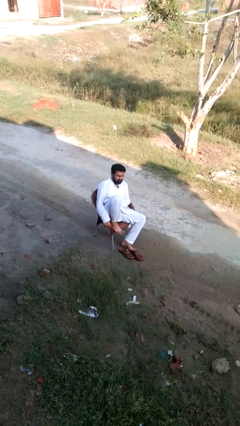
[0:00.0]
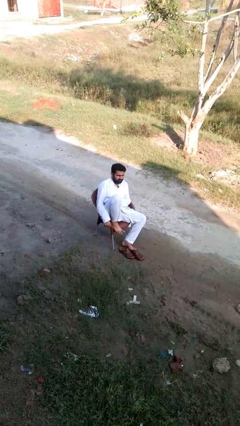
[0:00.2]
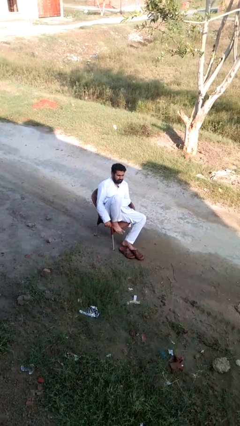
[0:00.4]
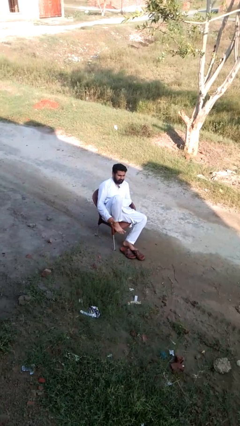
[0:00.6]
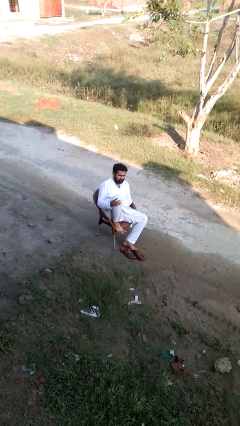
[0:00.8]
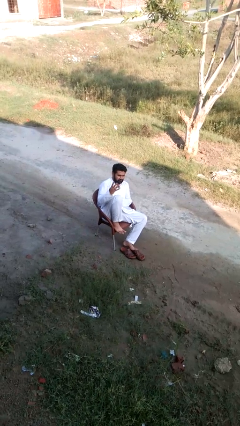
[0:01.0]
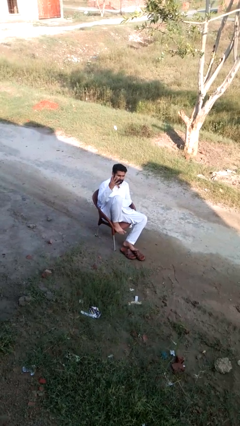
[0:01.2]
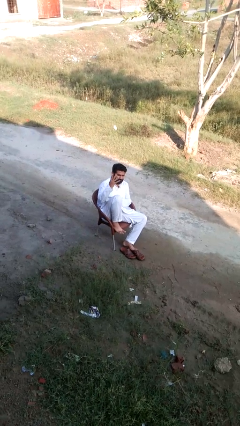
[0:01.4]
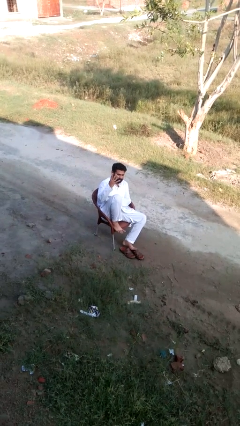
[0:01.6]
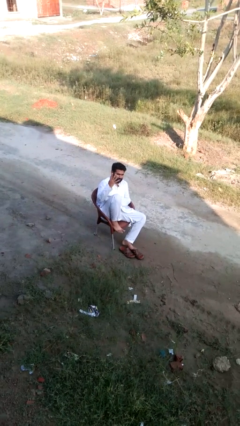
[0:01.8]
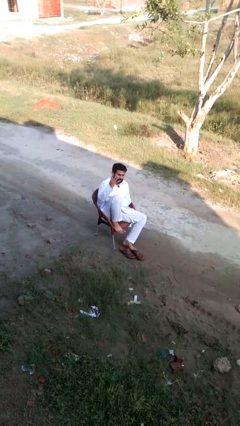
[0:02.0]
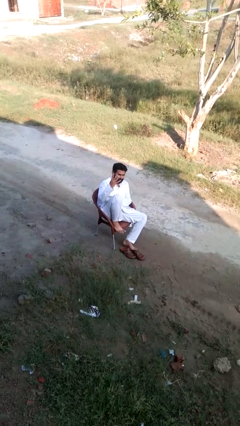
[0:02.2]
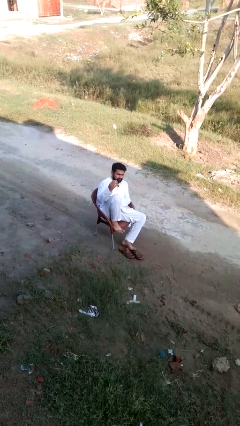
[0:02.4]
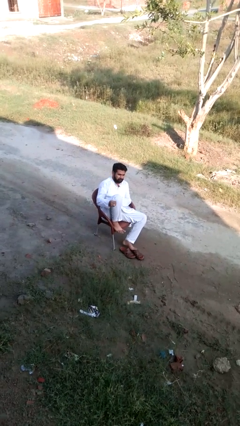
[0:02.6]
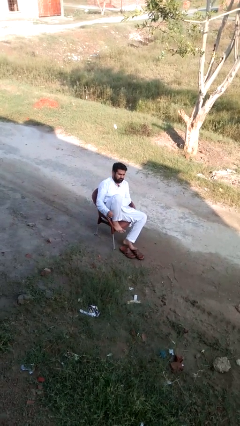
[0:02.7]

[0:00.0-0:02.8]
person gestures number four

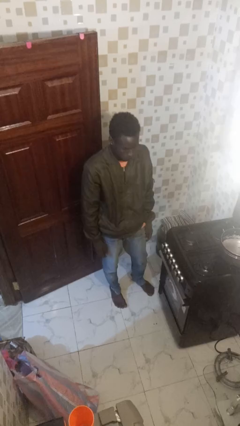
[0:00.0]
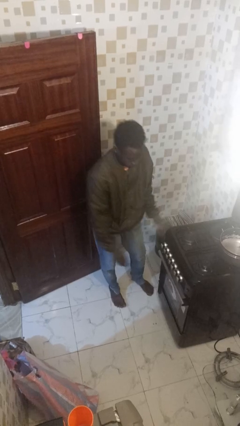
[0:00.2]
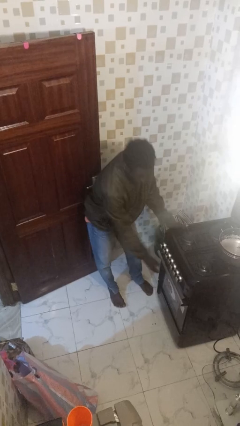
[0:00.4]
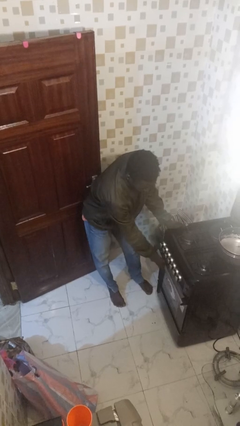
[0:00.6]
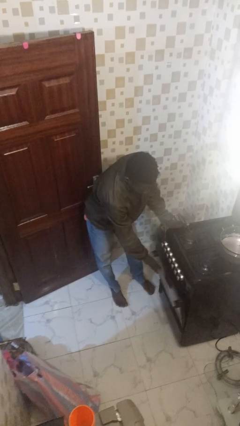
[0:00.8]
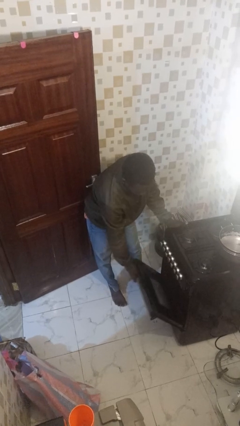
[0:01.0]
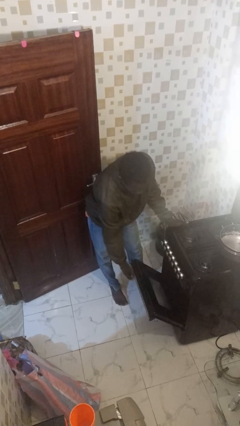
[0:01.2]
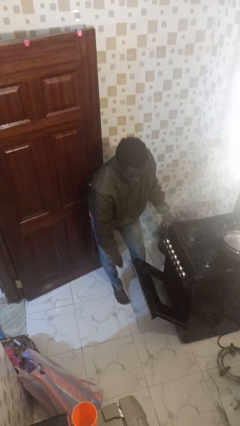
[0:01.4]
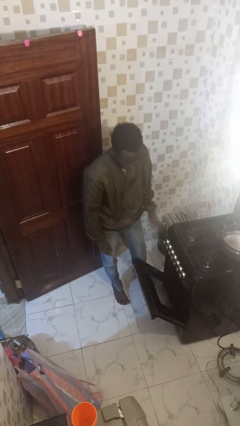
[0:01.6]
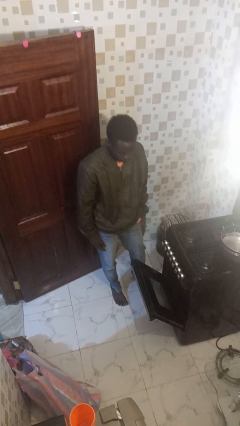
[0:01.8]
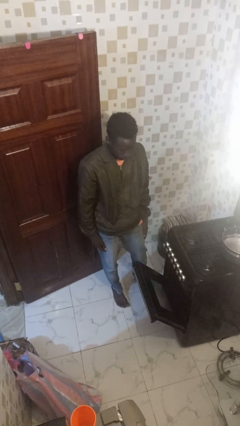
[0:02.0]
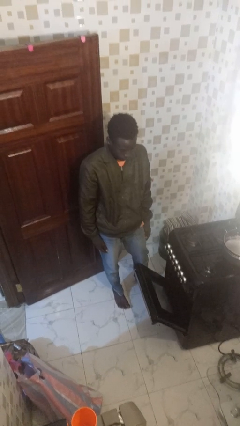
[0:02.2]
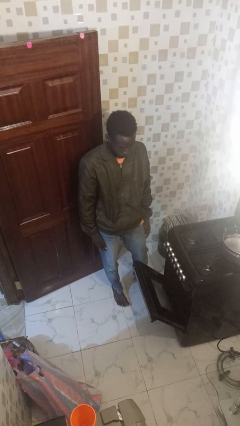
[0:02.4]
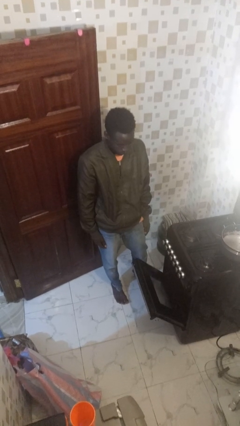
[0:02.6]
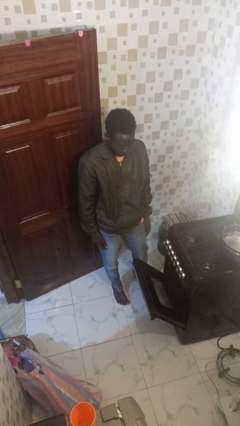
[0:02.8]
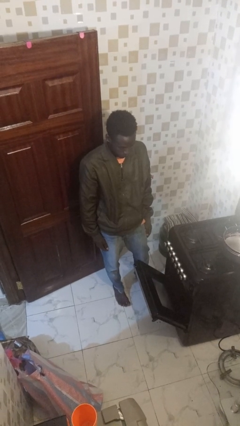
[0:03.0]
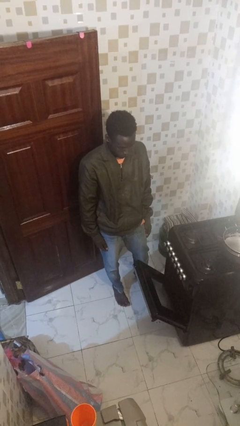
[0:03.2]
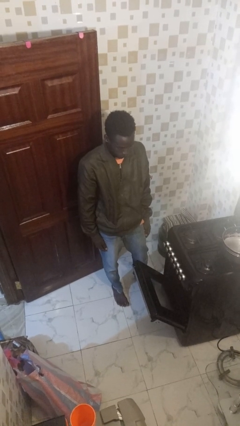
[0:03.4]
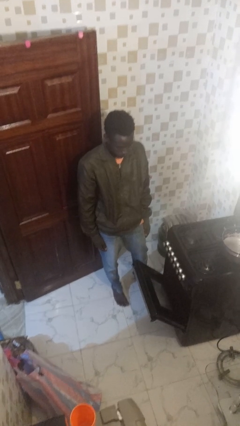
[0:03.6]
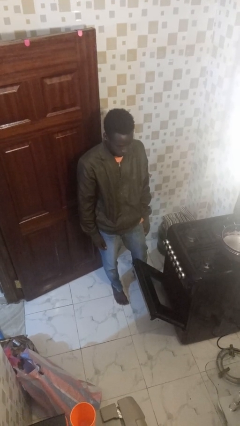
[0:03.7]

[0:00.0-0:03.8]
person opens oven door

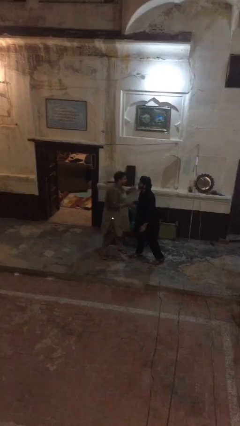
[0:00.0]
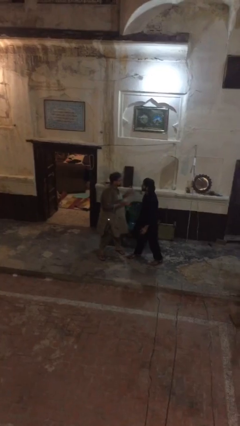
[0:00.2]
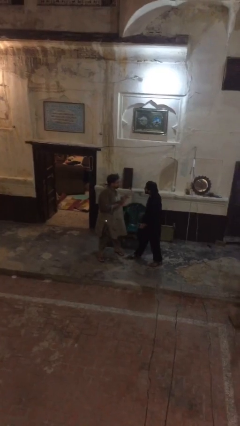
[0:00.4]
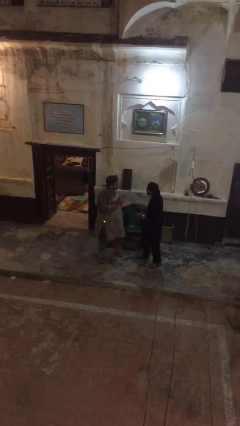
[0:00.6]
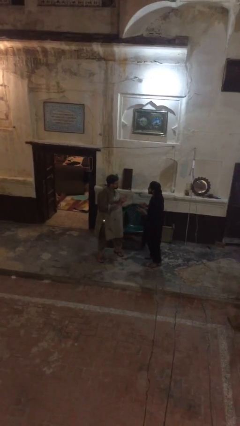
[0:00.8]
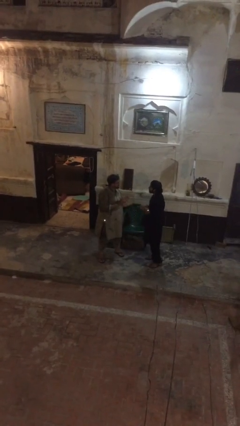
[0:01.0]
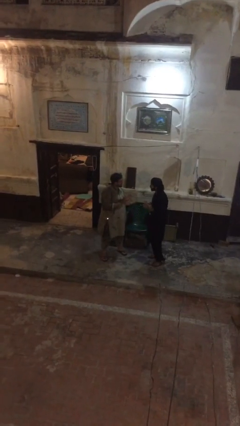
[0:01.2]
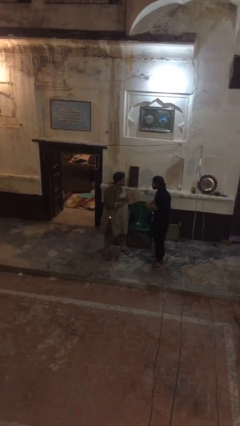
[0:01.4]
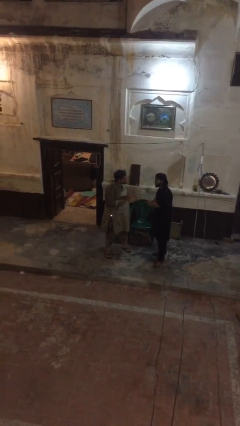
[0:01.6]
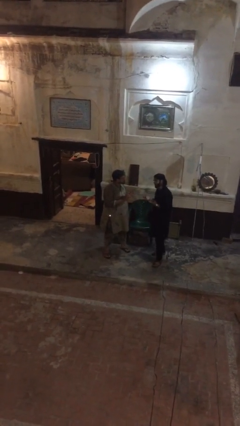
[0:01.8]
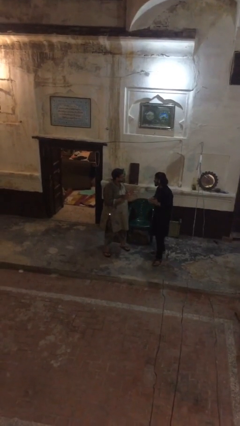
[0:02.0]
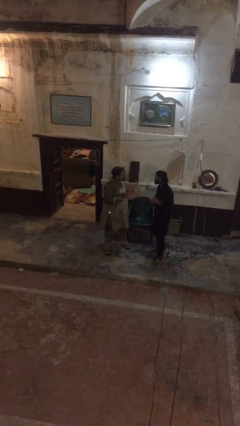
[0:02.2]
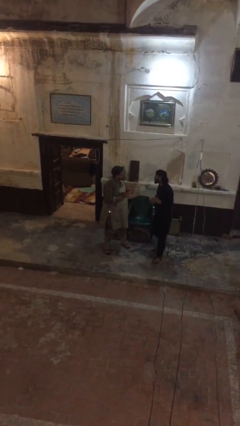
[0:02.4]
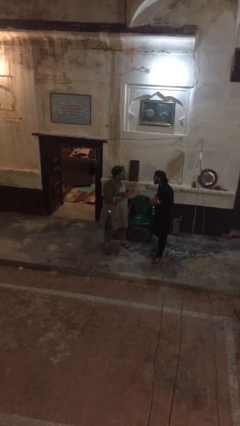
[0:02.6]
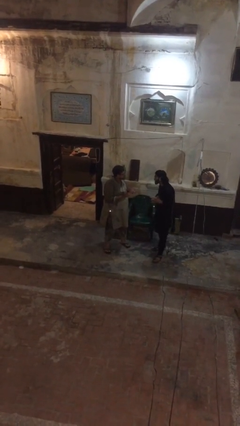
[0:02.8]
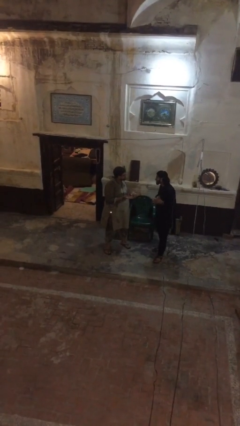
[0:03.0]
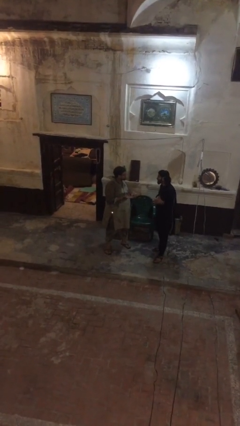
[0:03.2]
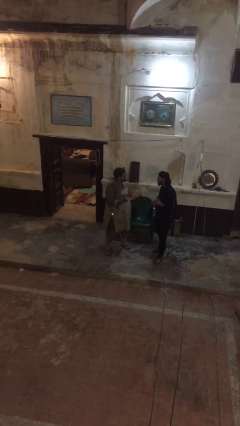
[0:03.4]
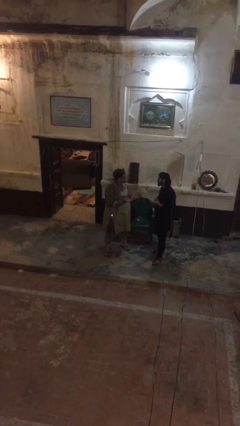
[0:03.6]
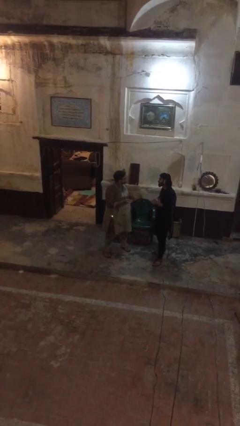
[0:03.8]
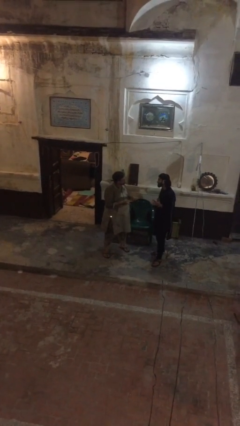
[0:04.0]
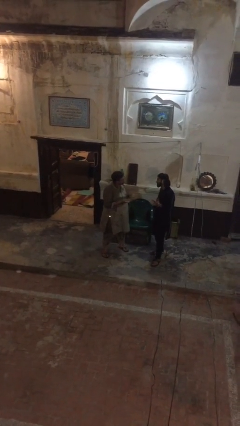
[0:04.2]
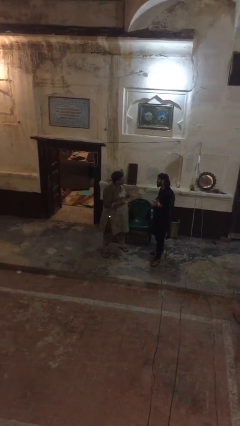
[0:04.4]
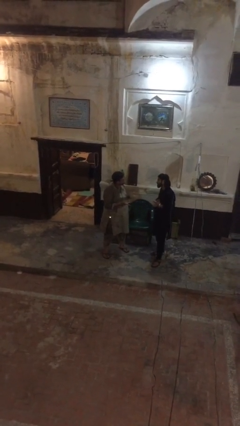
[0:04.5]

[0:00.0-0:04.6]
person talks to person

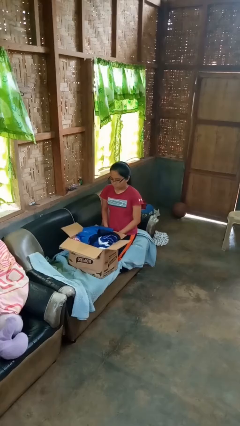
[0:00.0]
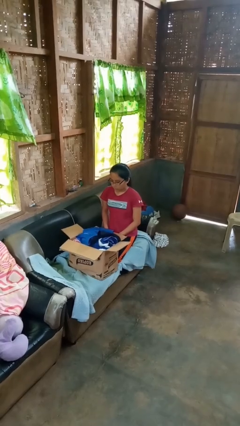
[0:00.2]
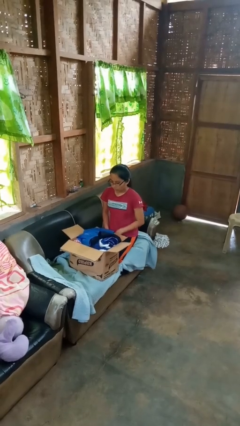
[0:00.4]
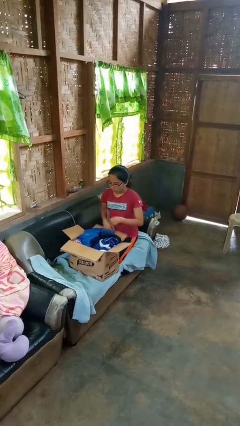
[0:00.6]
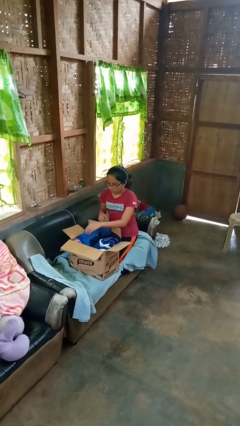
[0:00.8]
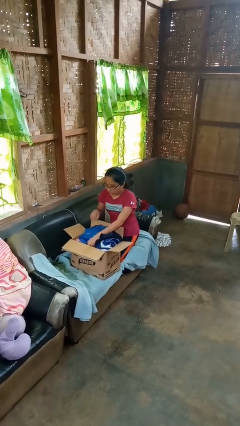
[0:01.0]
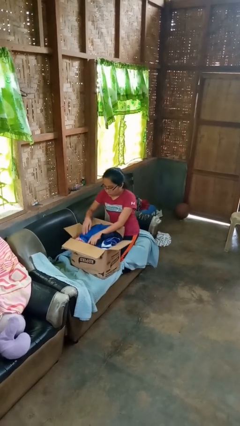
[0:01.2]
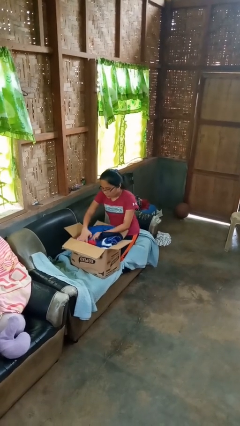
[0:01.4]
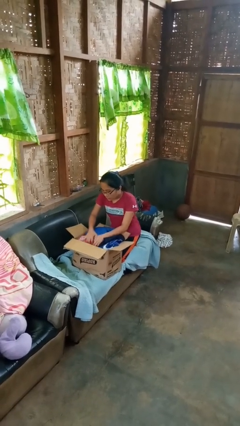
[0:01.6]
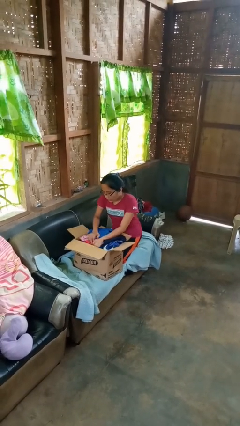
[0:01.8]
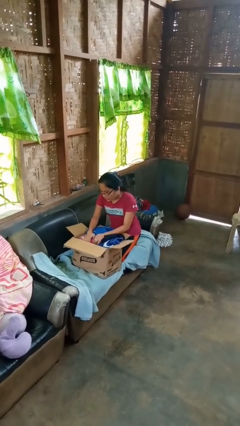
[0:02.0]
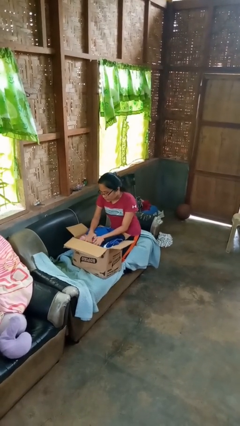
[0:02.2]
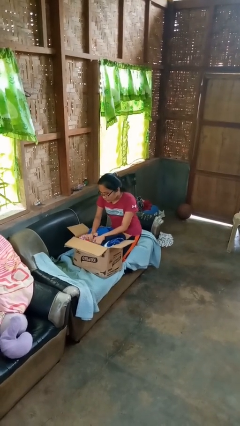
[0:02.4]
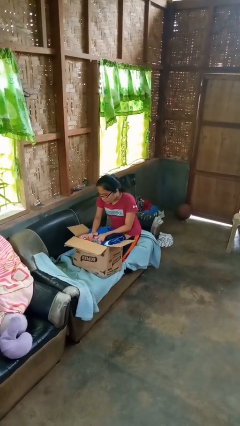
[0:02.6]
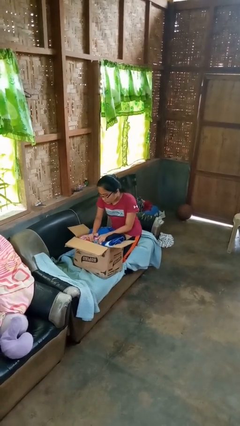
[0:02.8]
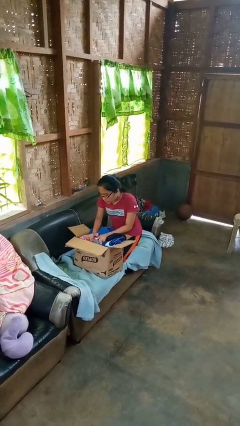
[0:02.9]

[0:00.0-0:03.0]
person searches in box

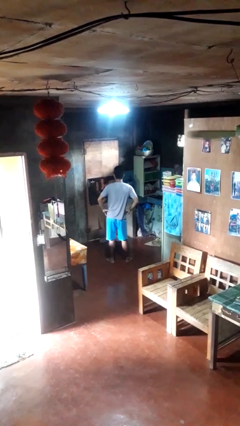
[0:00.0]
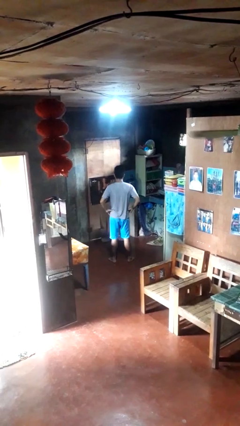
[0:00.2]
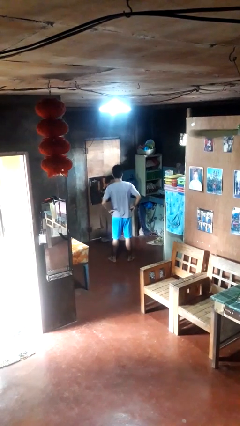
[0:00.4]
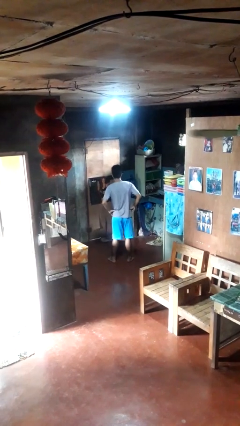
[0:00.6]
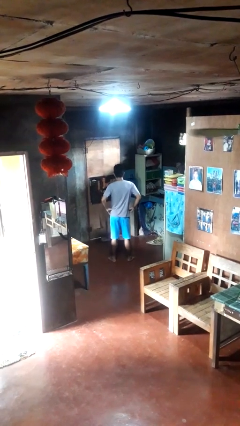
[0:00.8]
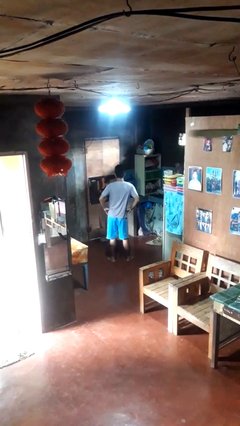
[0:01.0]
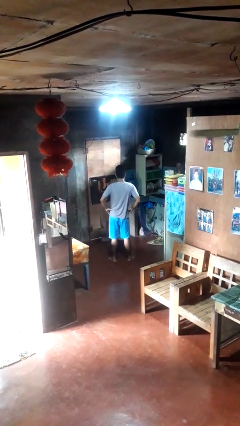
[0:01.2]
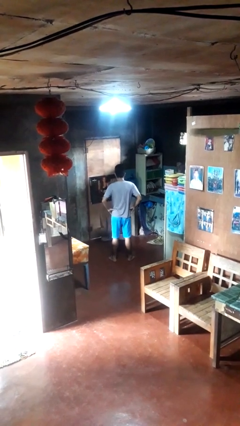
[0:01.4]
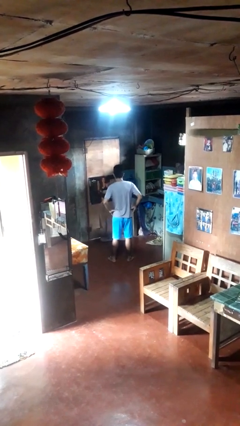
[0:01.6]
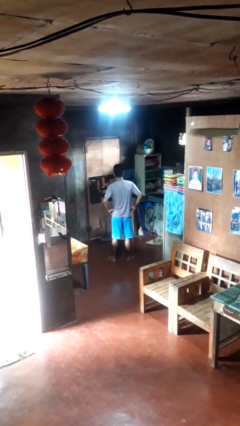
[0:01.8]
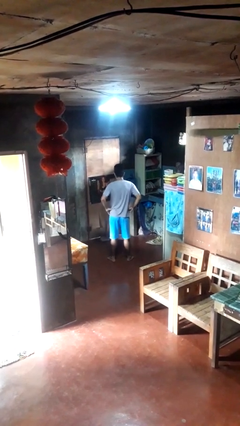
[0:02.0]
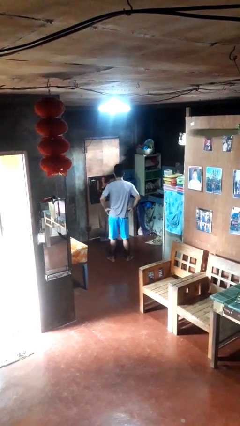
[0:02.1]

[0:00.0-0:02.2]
person wiggles hips

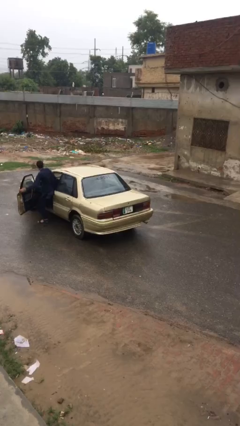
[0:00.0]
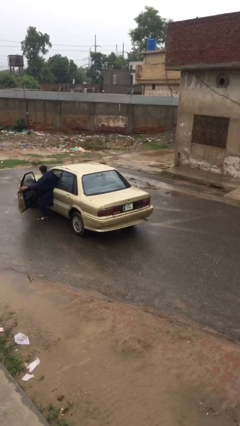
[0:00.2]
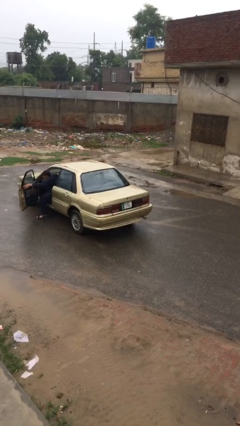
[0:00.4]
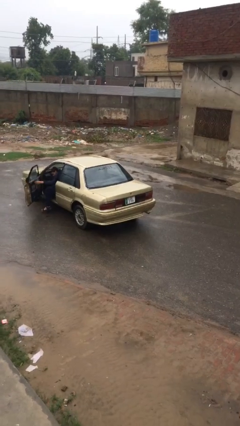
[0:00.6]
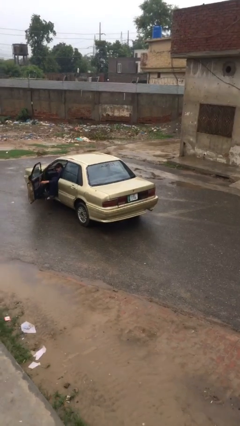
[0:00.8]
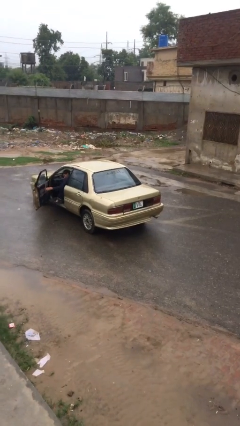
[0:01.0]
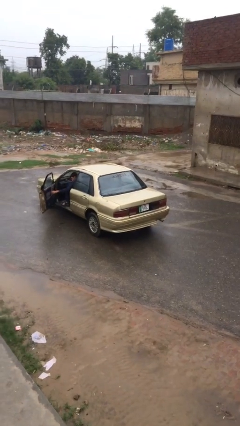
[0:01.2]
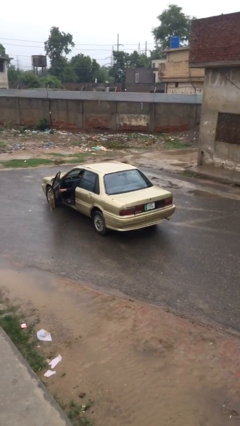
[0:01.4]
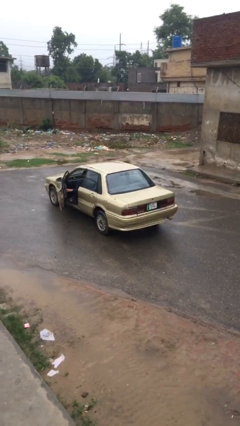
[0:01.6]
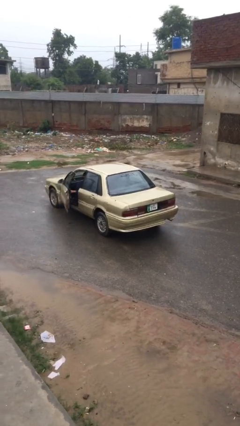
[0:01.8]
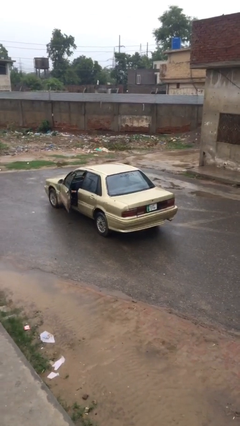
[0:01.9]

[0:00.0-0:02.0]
car picks up person
